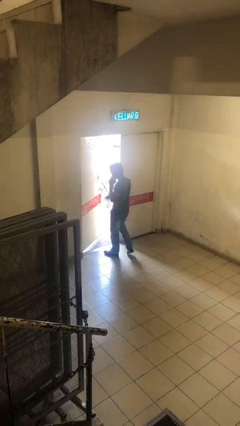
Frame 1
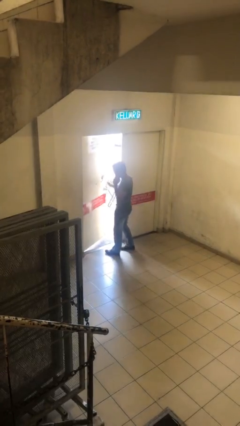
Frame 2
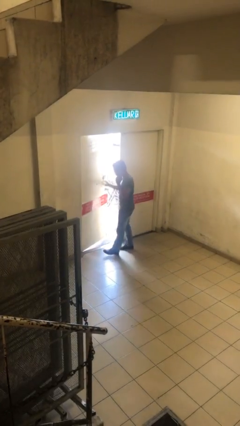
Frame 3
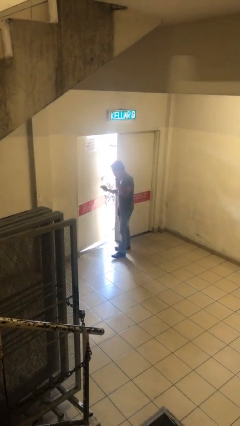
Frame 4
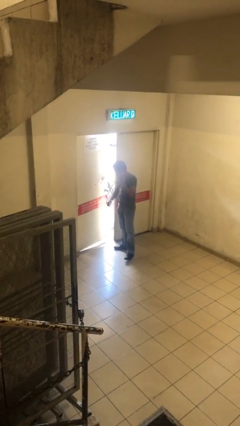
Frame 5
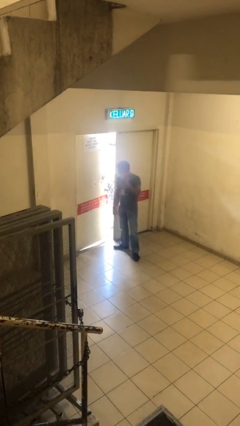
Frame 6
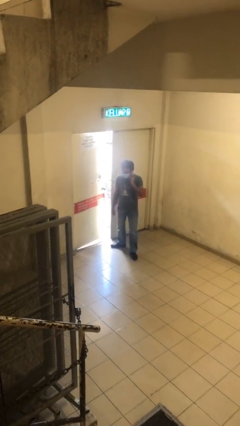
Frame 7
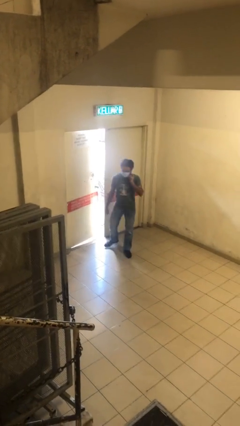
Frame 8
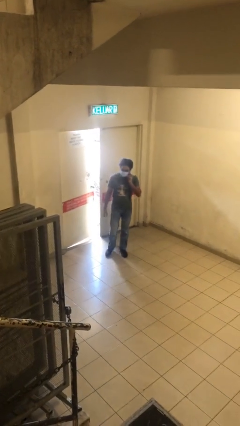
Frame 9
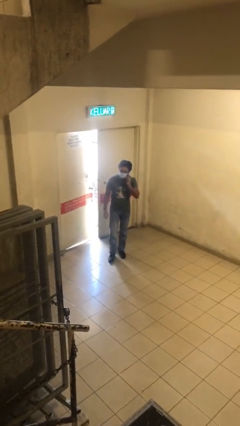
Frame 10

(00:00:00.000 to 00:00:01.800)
person closes facility door

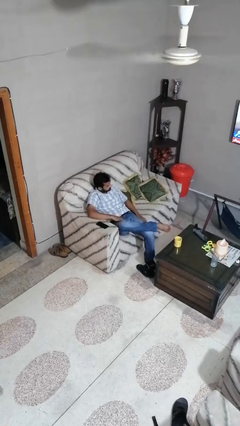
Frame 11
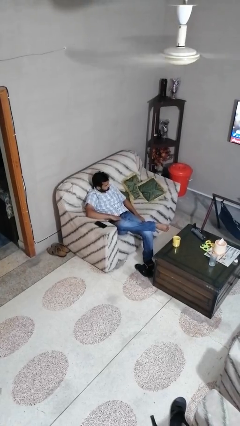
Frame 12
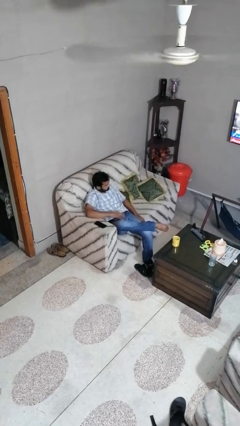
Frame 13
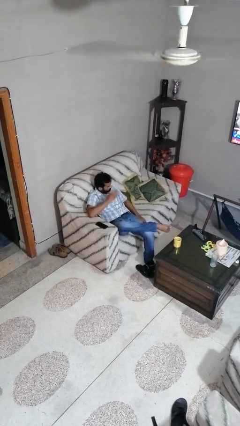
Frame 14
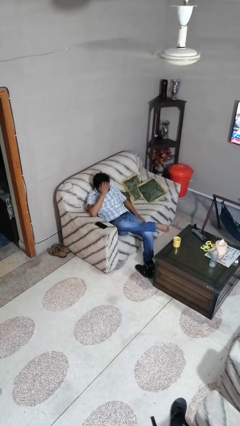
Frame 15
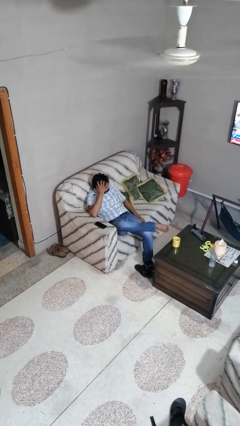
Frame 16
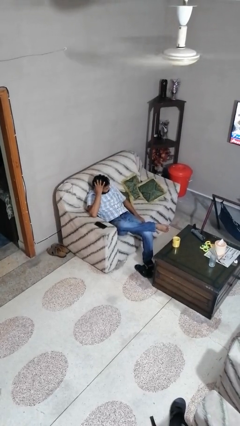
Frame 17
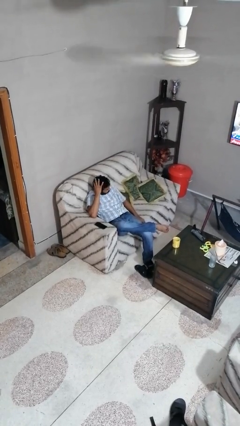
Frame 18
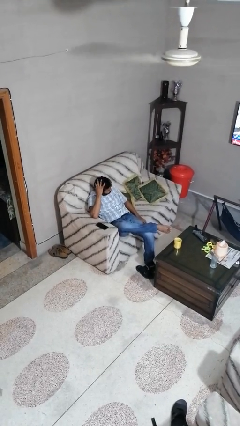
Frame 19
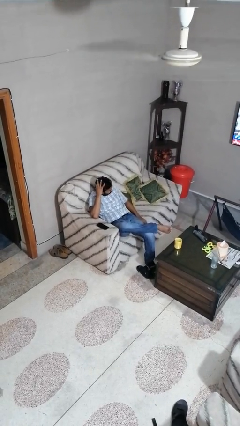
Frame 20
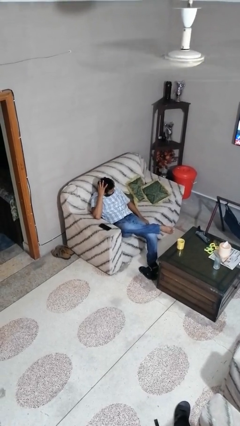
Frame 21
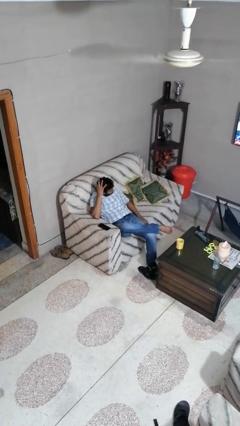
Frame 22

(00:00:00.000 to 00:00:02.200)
person strokes hair

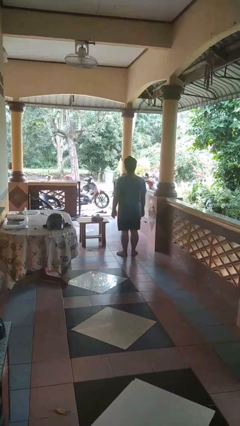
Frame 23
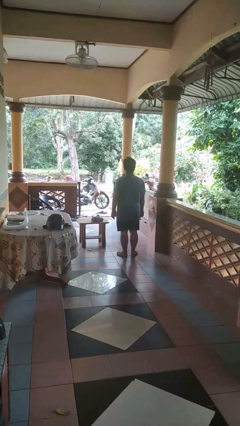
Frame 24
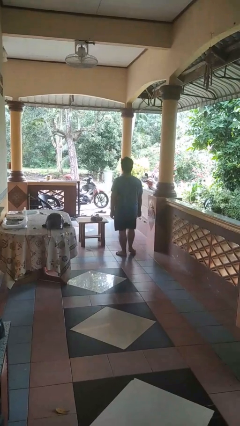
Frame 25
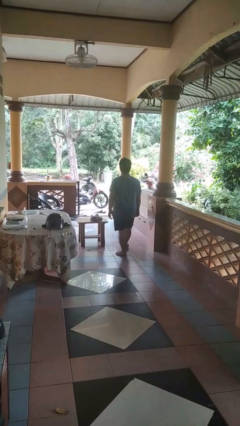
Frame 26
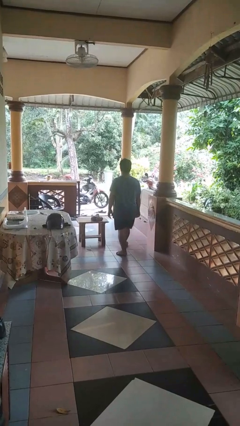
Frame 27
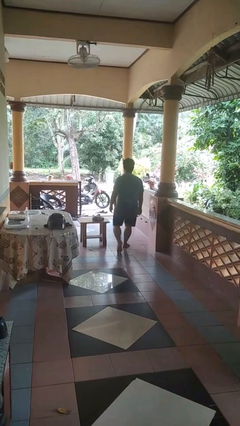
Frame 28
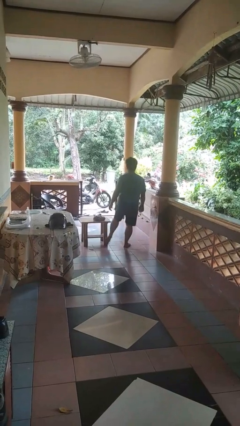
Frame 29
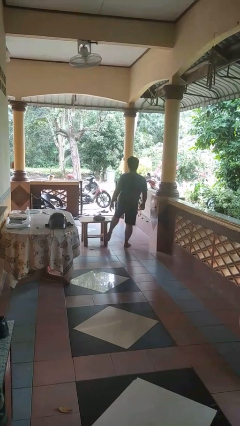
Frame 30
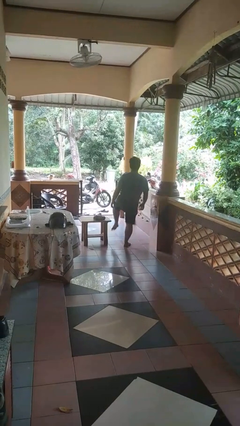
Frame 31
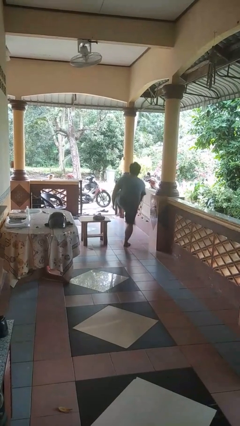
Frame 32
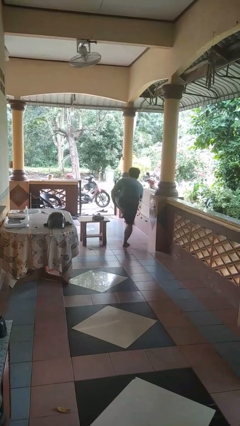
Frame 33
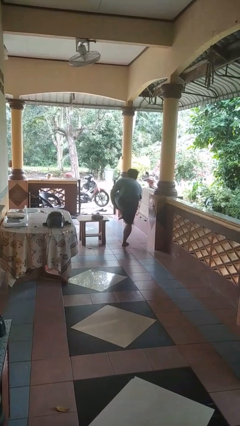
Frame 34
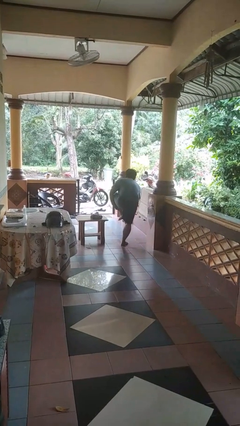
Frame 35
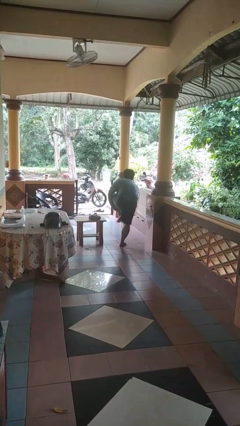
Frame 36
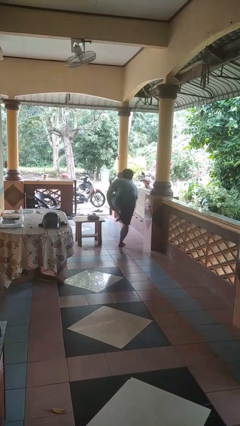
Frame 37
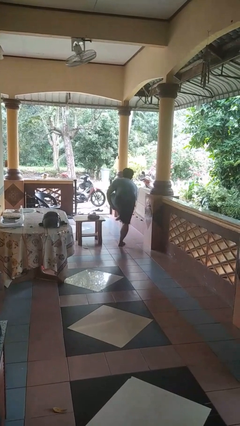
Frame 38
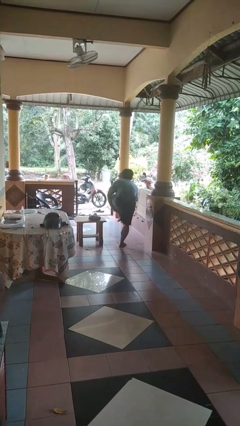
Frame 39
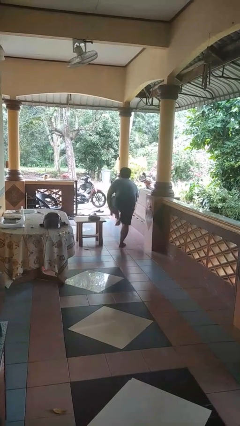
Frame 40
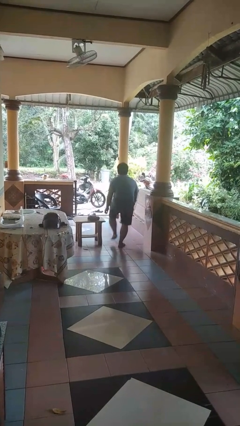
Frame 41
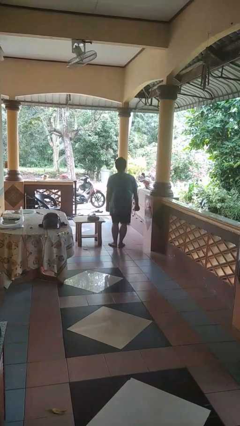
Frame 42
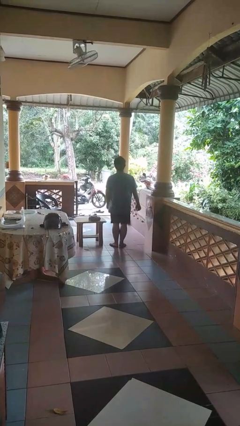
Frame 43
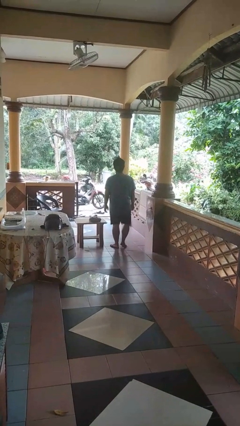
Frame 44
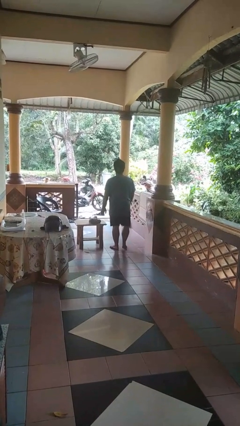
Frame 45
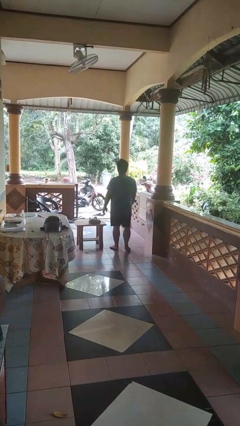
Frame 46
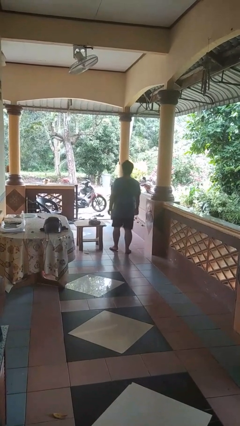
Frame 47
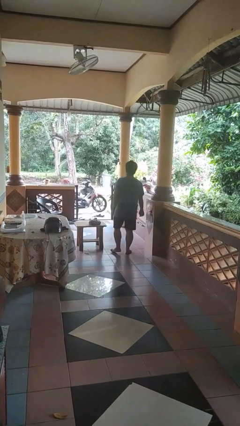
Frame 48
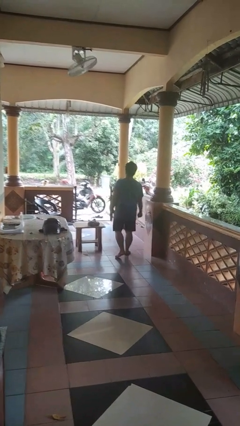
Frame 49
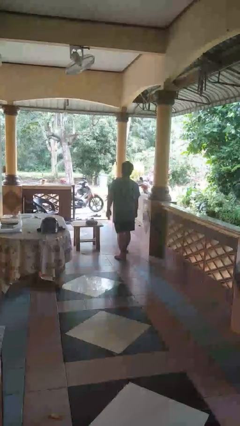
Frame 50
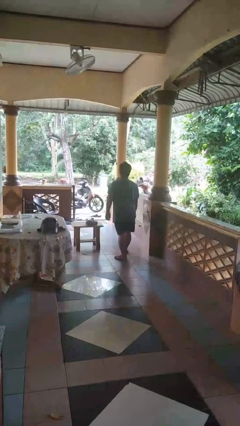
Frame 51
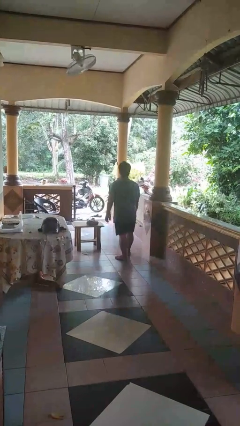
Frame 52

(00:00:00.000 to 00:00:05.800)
person stubs toe

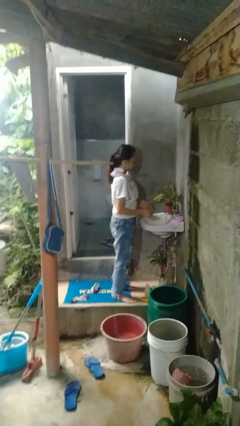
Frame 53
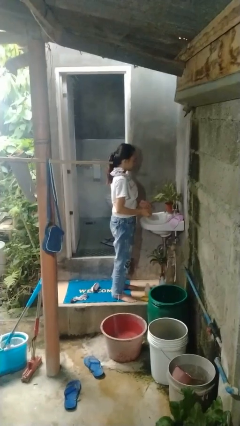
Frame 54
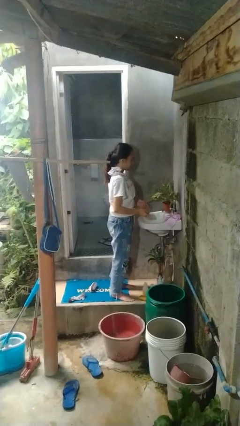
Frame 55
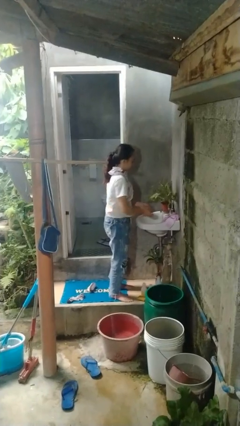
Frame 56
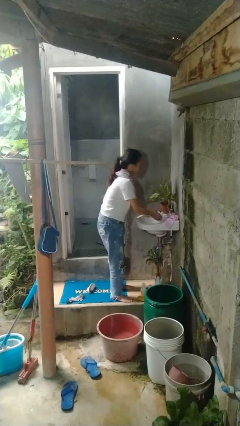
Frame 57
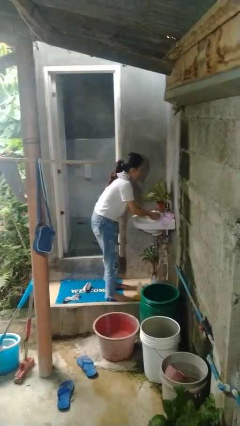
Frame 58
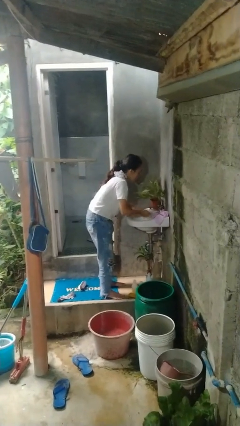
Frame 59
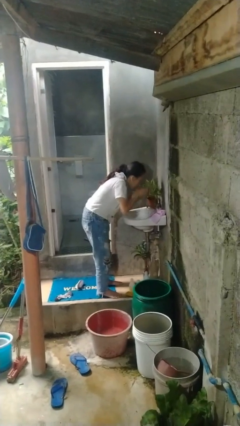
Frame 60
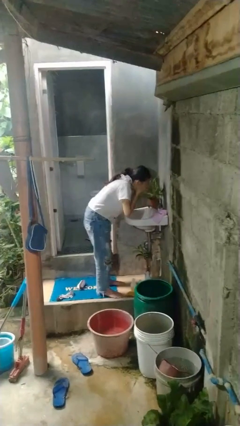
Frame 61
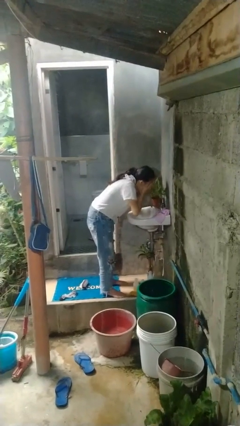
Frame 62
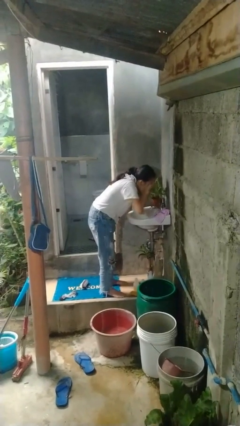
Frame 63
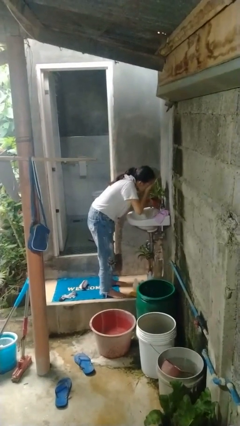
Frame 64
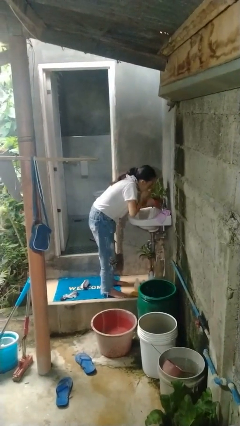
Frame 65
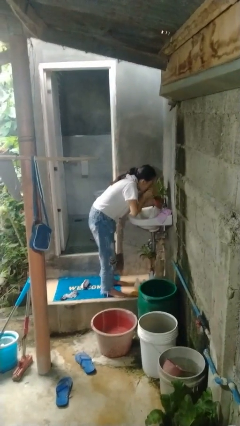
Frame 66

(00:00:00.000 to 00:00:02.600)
person washes face

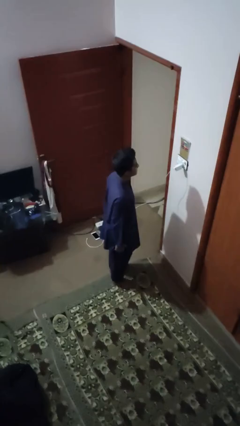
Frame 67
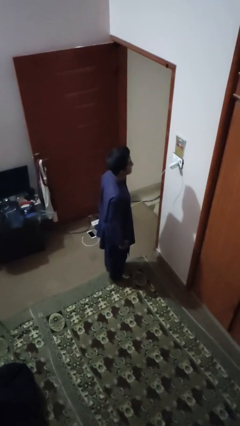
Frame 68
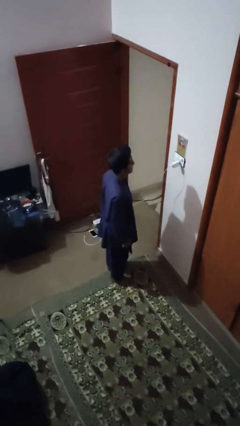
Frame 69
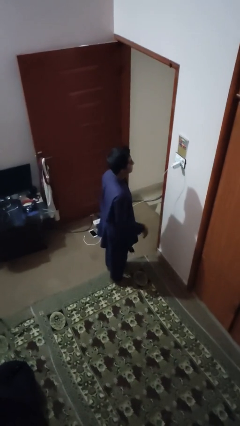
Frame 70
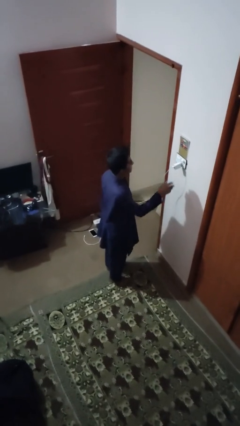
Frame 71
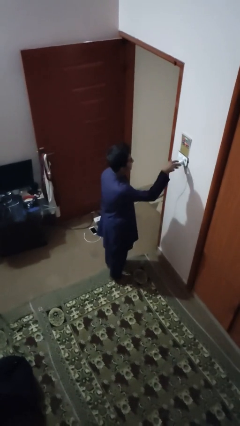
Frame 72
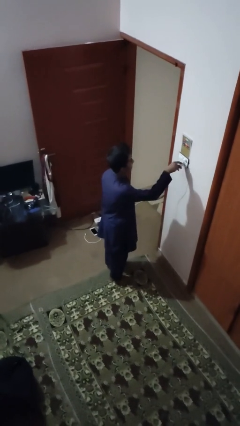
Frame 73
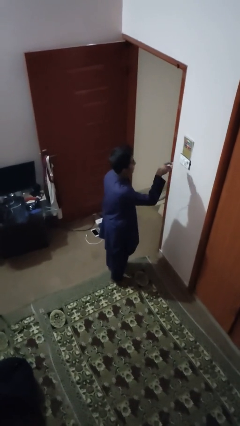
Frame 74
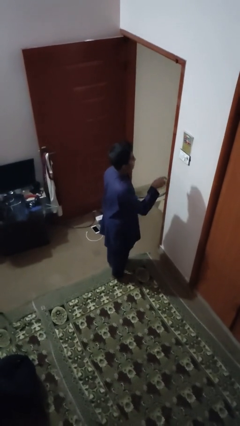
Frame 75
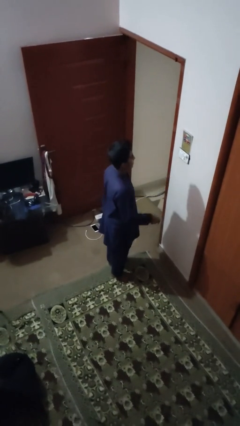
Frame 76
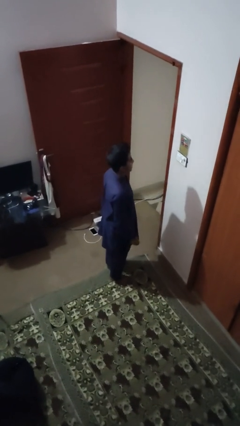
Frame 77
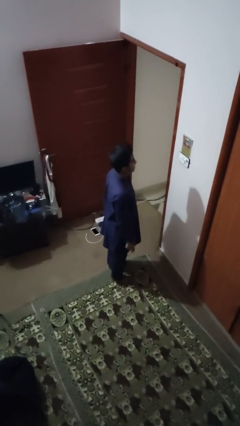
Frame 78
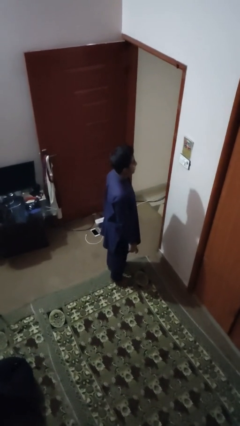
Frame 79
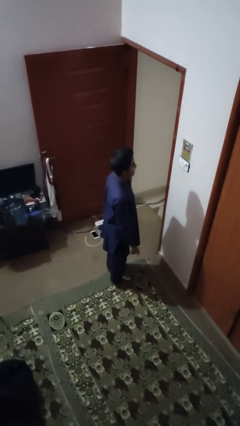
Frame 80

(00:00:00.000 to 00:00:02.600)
person unplugs from electrical socket

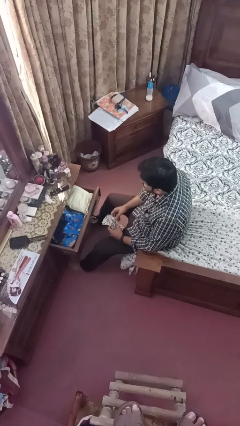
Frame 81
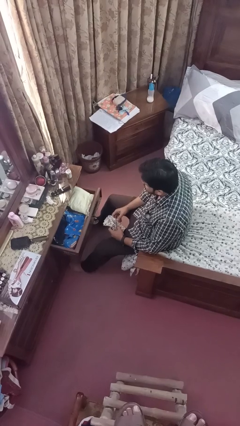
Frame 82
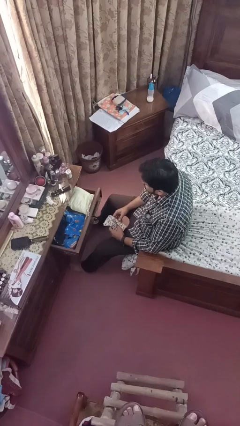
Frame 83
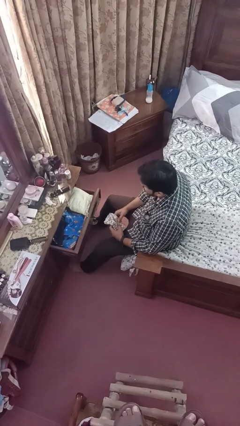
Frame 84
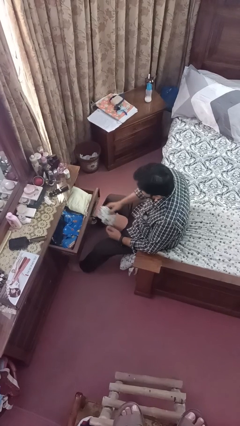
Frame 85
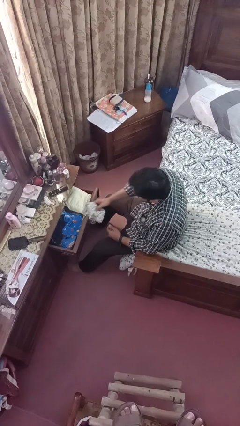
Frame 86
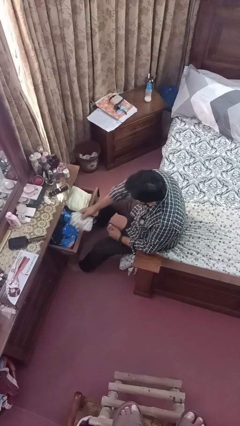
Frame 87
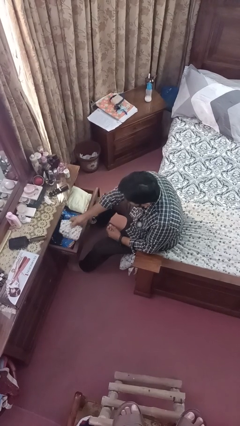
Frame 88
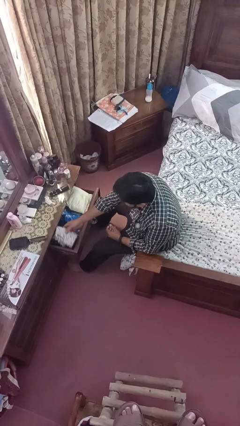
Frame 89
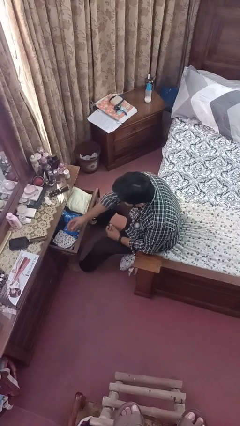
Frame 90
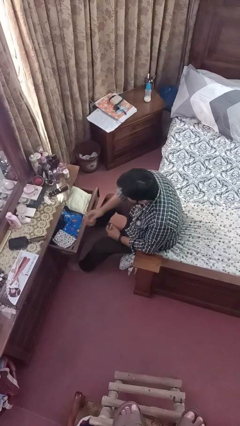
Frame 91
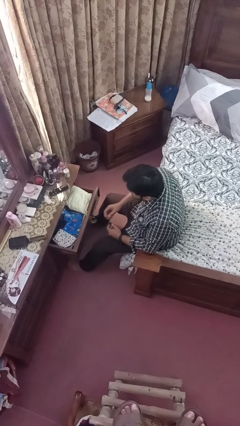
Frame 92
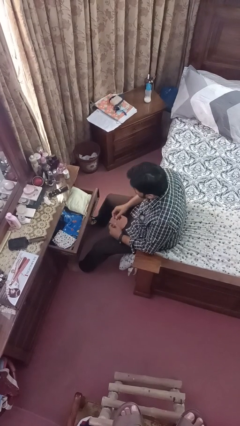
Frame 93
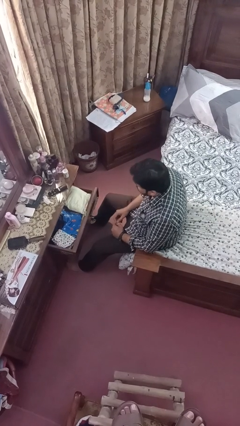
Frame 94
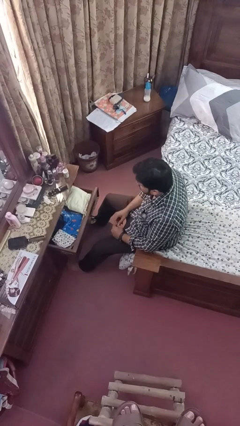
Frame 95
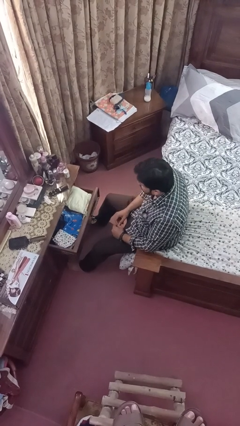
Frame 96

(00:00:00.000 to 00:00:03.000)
person puts clothes into dresser
